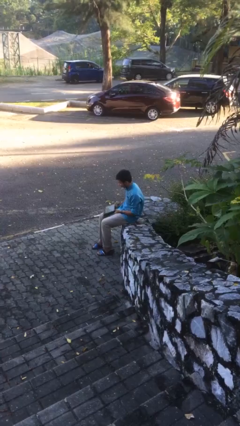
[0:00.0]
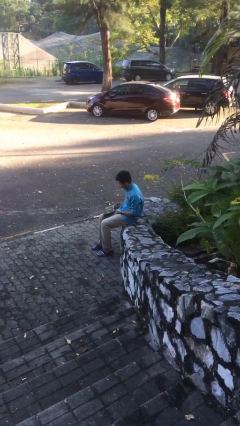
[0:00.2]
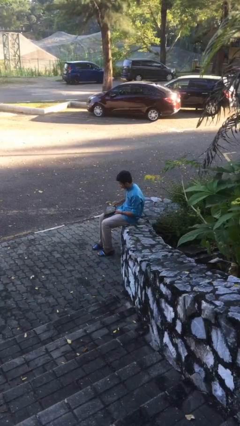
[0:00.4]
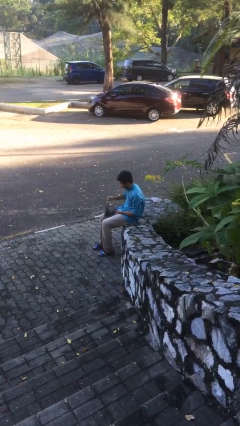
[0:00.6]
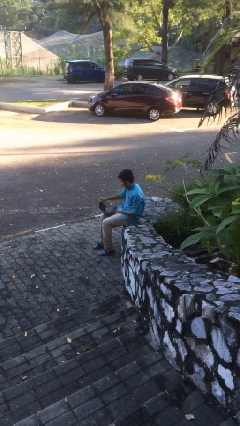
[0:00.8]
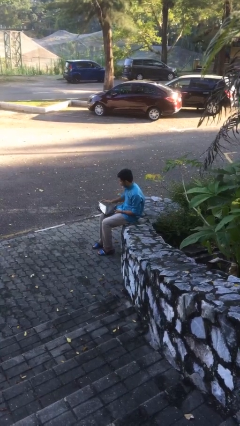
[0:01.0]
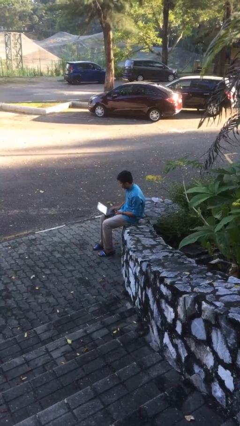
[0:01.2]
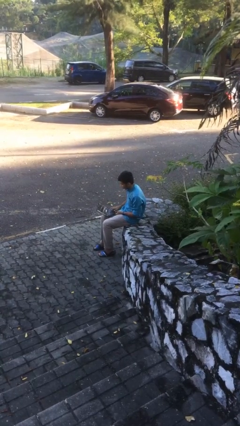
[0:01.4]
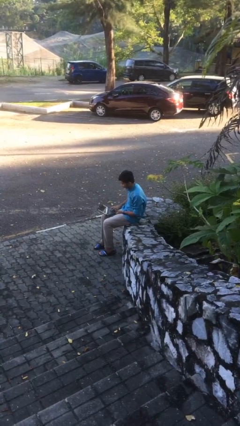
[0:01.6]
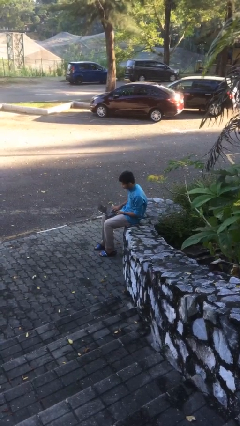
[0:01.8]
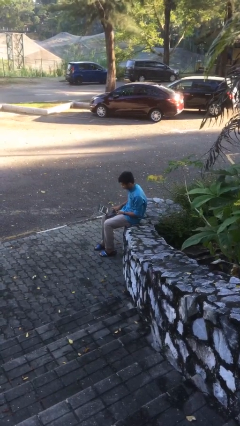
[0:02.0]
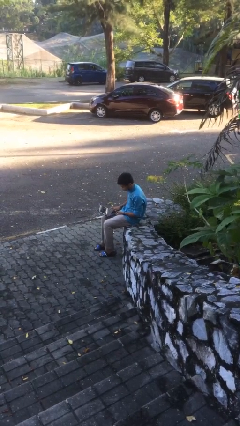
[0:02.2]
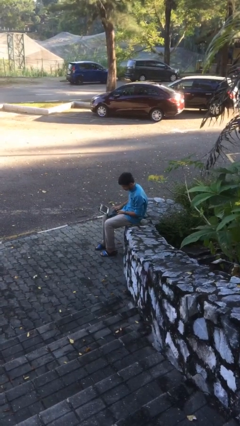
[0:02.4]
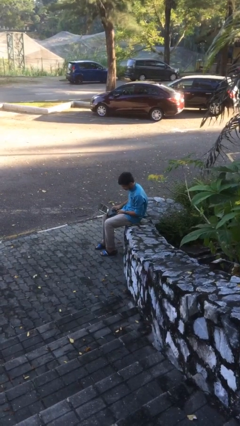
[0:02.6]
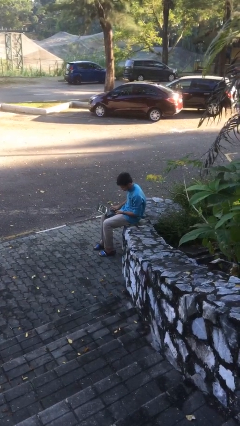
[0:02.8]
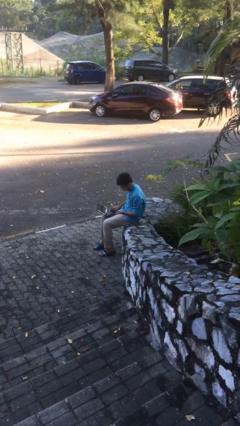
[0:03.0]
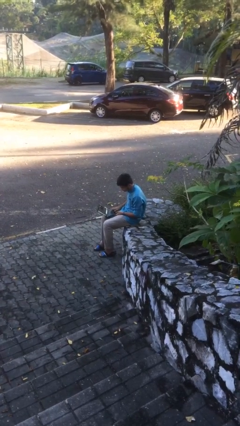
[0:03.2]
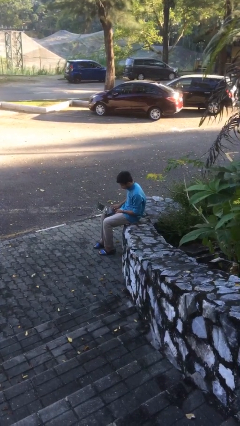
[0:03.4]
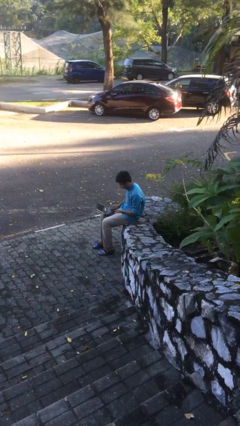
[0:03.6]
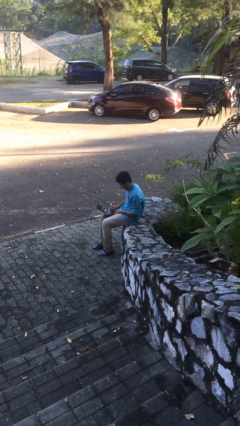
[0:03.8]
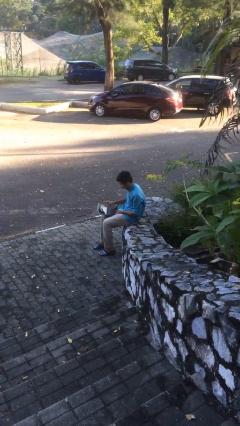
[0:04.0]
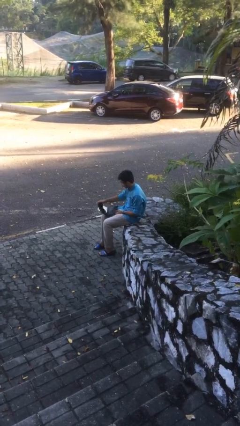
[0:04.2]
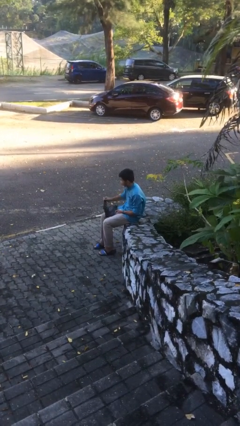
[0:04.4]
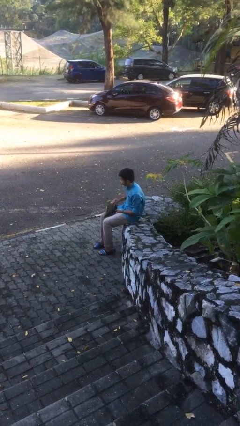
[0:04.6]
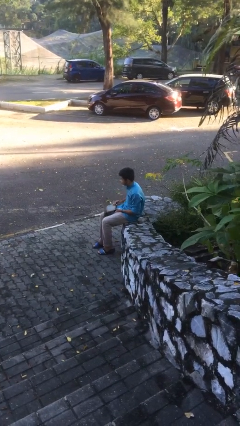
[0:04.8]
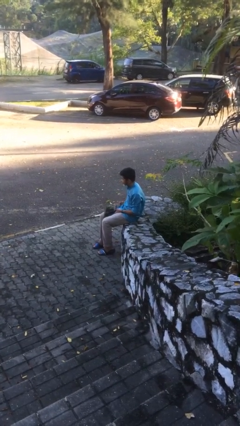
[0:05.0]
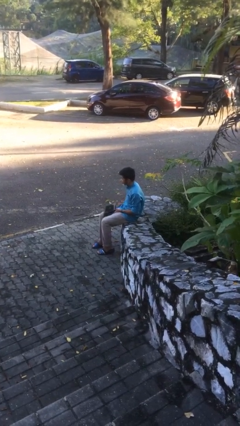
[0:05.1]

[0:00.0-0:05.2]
person interacts with laptop

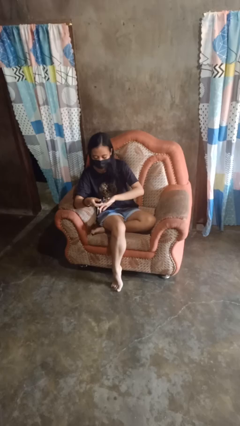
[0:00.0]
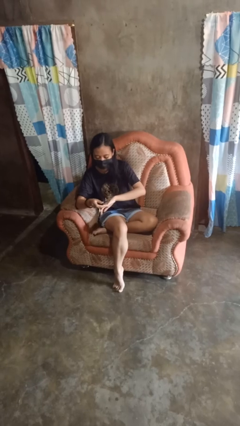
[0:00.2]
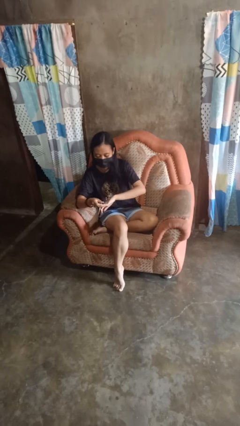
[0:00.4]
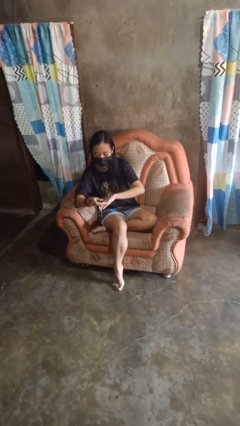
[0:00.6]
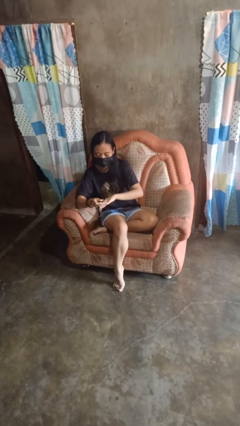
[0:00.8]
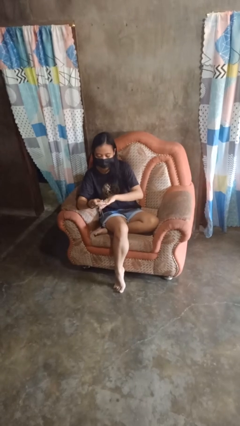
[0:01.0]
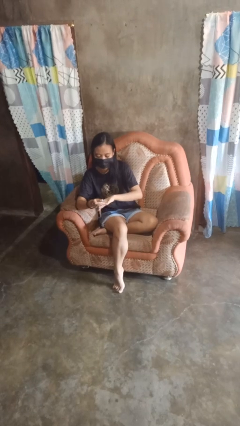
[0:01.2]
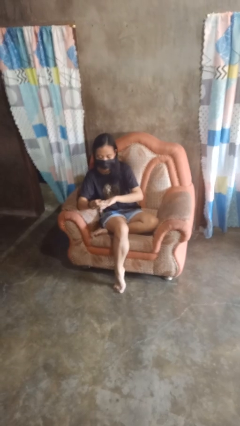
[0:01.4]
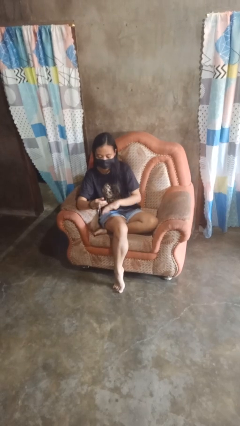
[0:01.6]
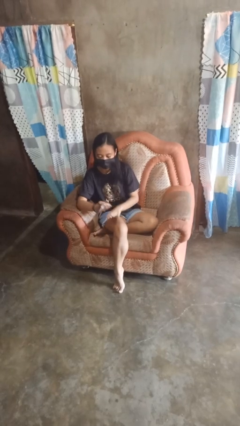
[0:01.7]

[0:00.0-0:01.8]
person clips fingernails

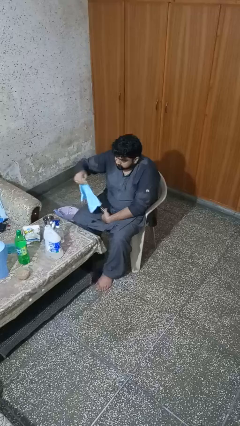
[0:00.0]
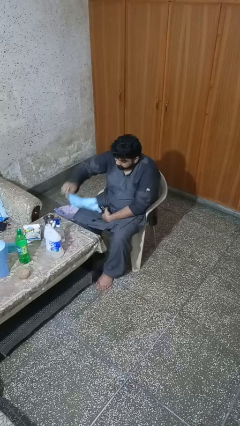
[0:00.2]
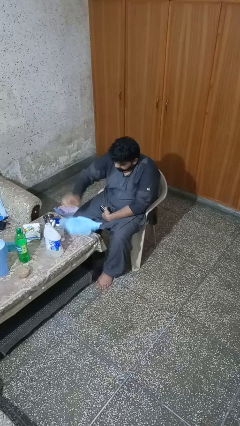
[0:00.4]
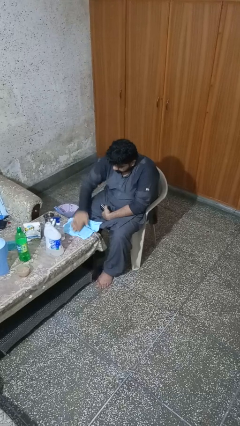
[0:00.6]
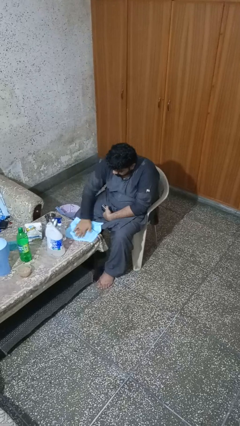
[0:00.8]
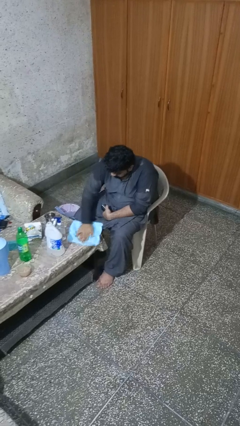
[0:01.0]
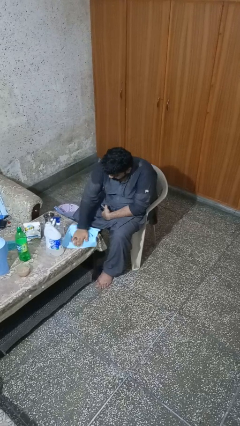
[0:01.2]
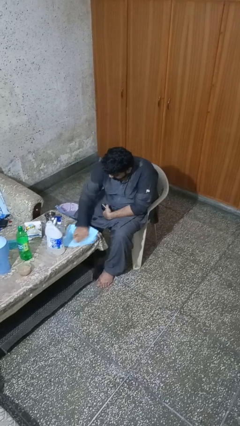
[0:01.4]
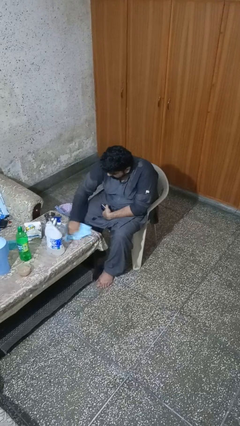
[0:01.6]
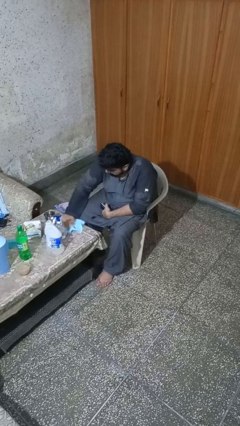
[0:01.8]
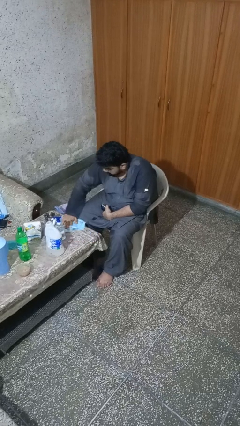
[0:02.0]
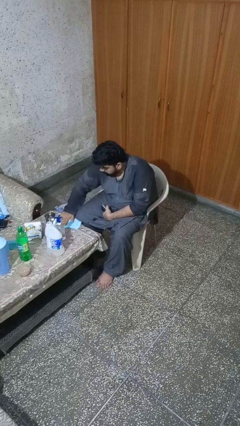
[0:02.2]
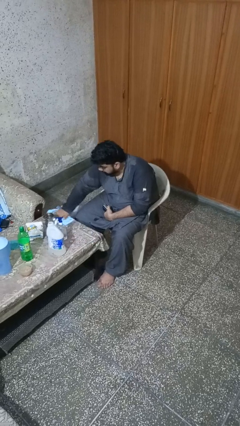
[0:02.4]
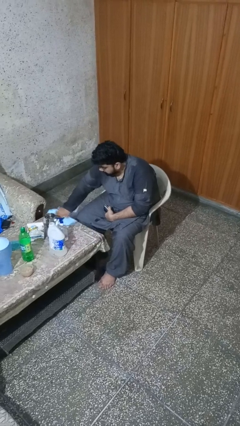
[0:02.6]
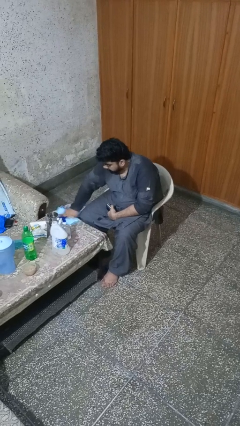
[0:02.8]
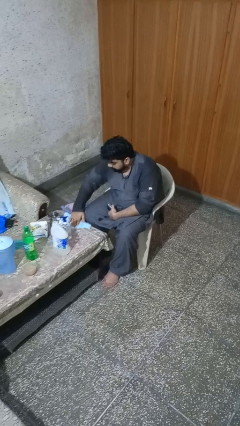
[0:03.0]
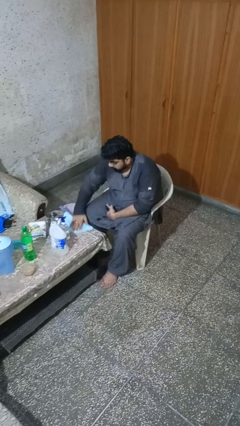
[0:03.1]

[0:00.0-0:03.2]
person cleans table with rag

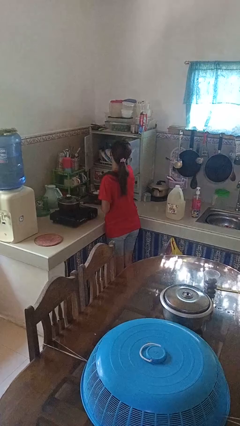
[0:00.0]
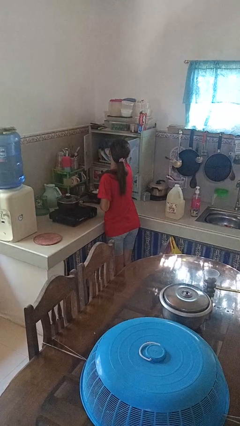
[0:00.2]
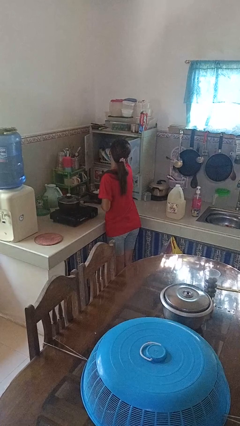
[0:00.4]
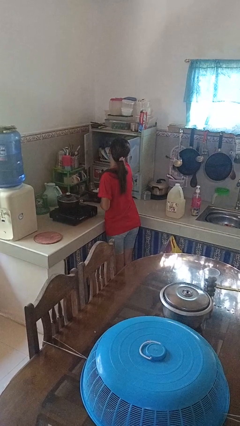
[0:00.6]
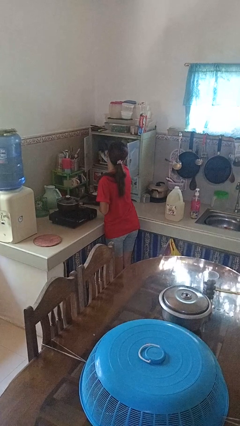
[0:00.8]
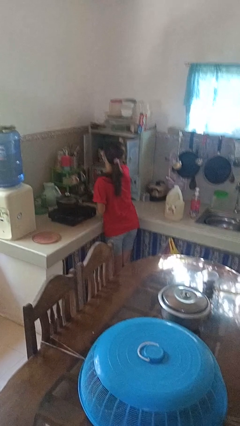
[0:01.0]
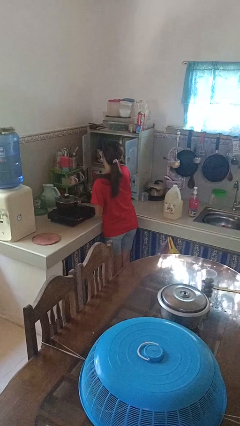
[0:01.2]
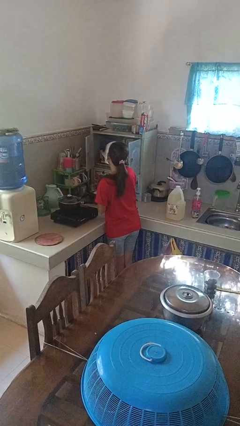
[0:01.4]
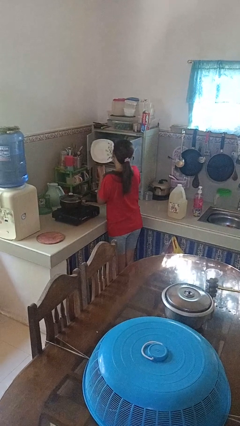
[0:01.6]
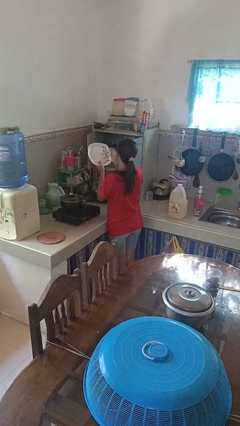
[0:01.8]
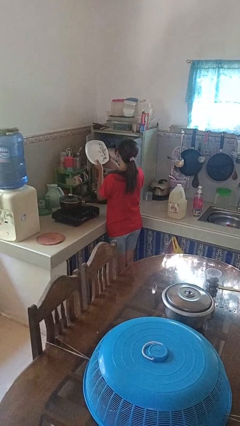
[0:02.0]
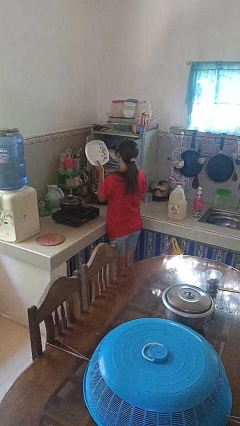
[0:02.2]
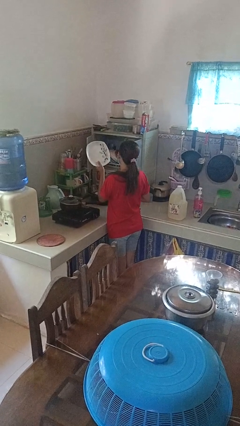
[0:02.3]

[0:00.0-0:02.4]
person takes object from cabinet

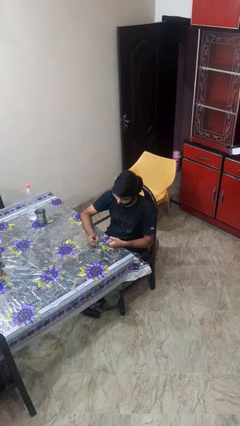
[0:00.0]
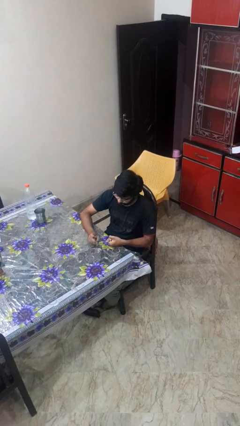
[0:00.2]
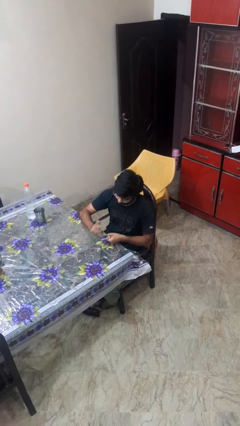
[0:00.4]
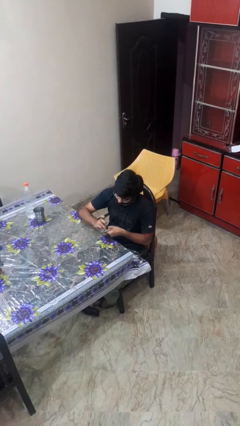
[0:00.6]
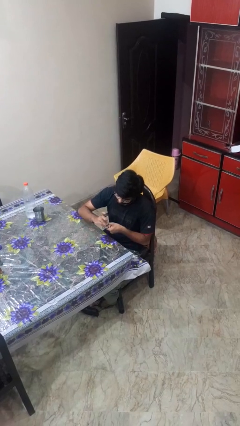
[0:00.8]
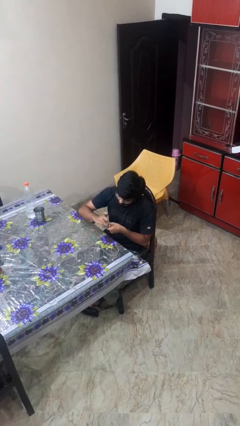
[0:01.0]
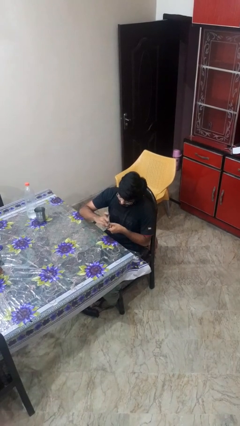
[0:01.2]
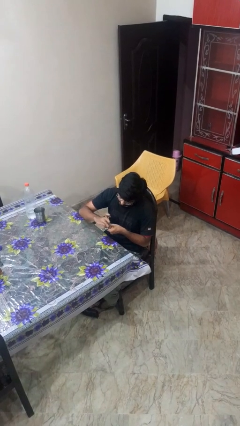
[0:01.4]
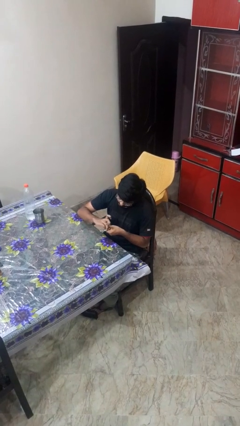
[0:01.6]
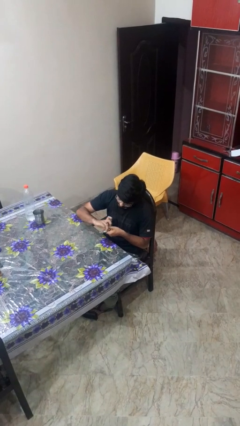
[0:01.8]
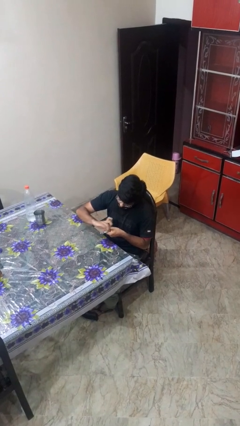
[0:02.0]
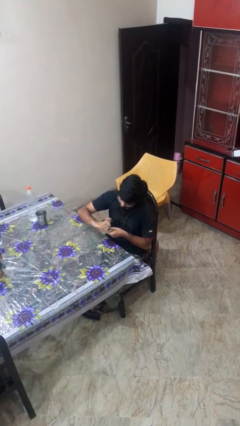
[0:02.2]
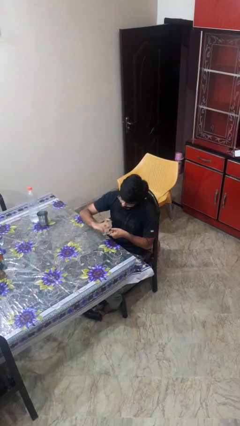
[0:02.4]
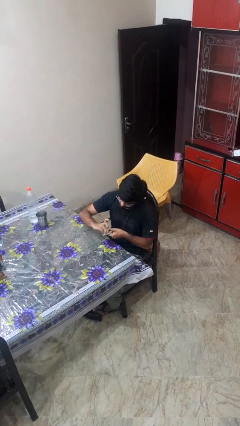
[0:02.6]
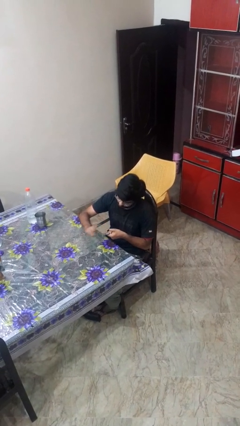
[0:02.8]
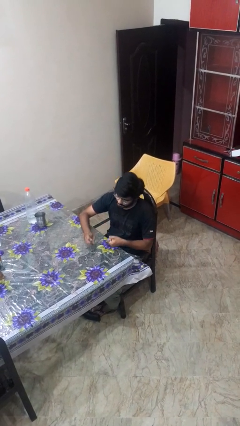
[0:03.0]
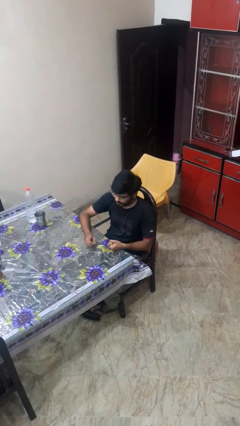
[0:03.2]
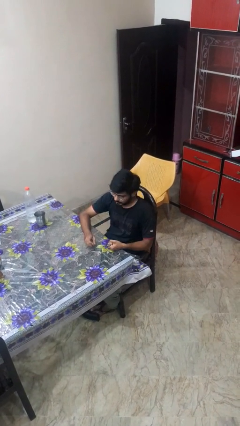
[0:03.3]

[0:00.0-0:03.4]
person files fingernails

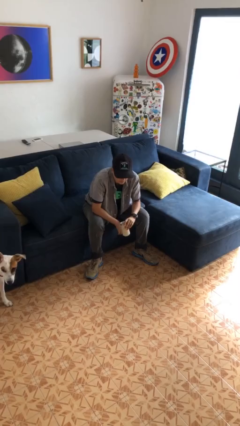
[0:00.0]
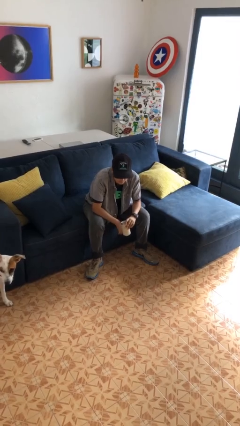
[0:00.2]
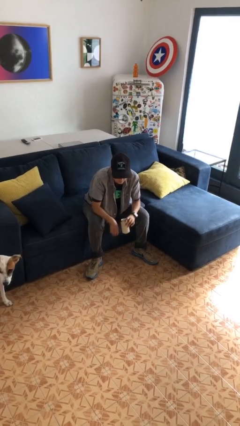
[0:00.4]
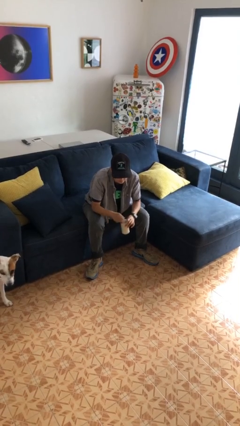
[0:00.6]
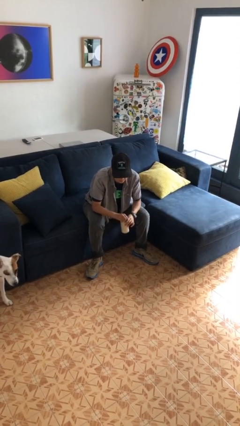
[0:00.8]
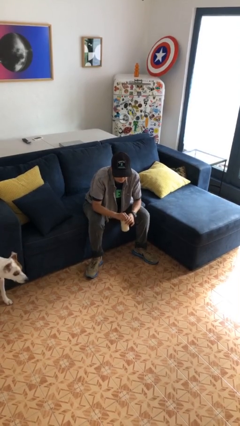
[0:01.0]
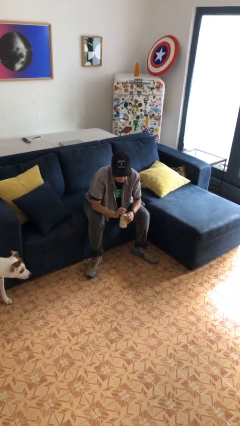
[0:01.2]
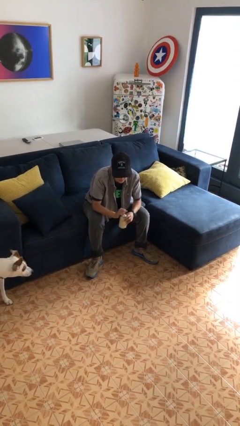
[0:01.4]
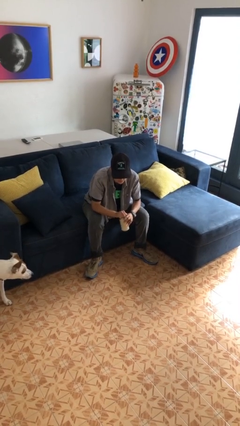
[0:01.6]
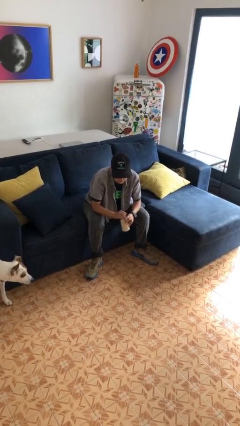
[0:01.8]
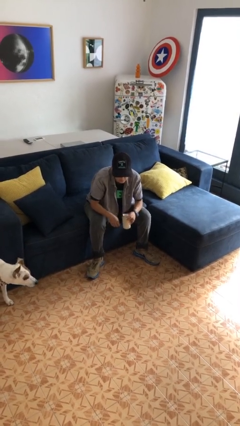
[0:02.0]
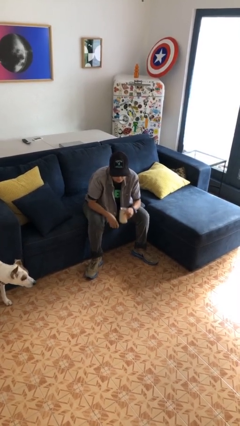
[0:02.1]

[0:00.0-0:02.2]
person opens beverage can
